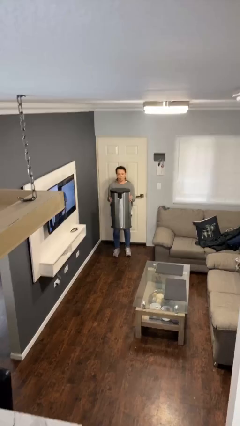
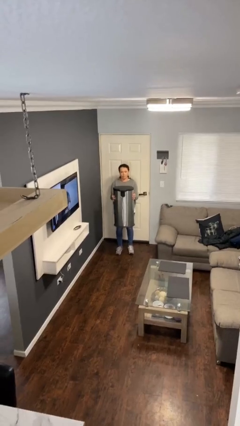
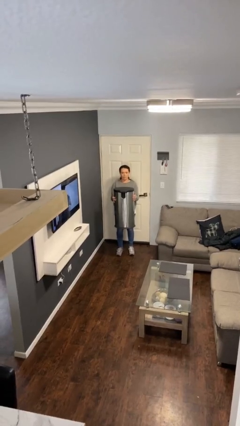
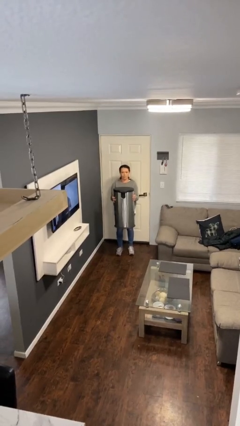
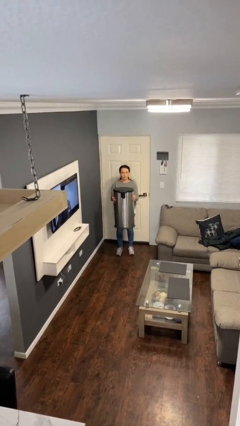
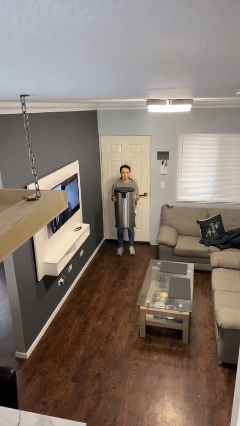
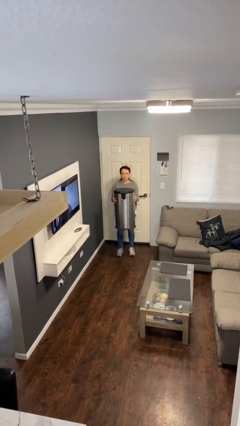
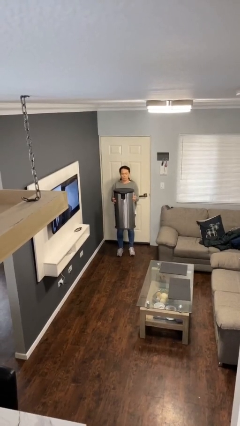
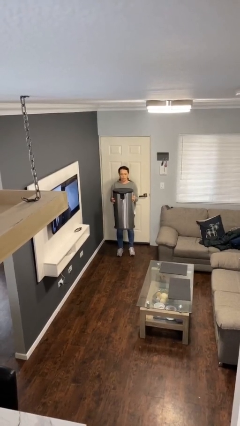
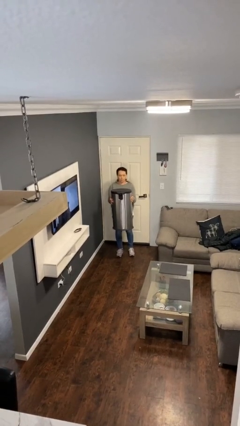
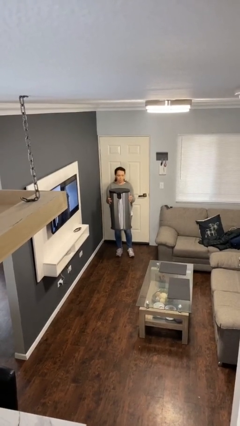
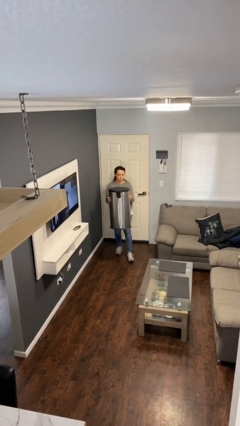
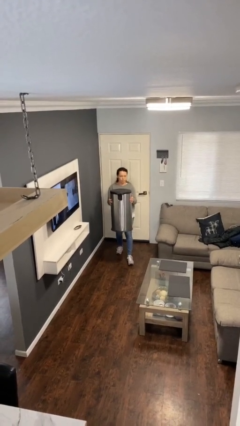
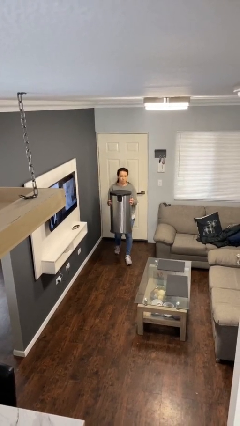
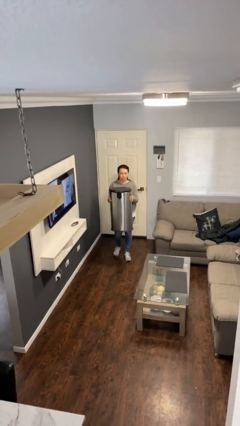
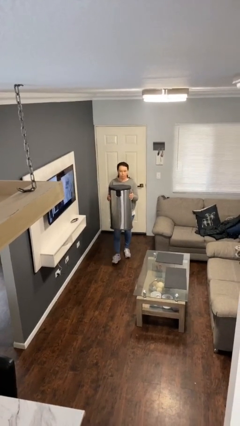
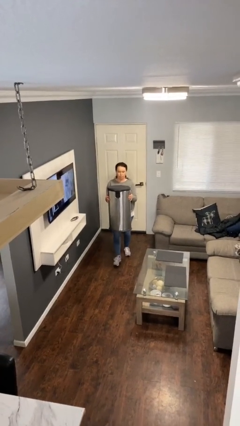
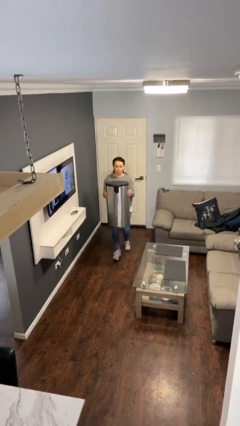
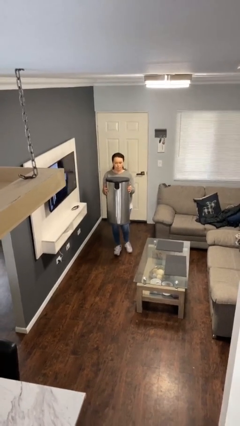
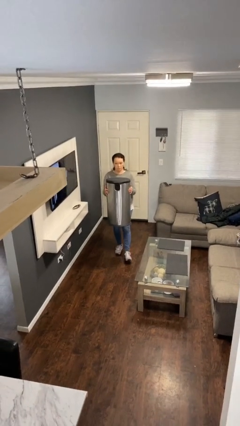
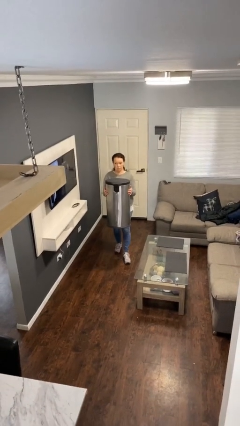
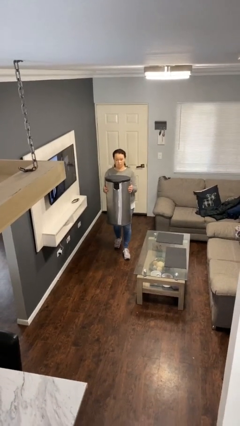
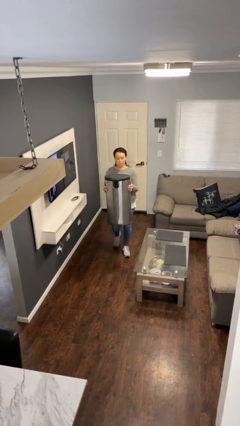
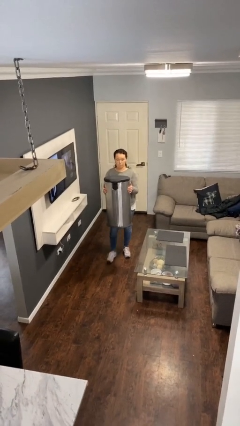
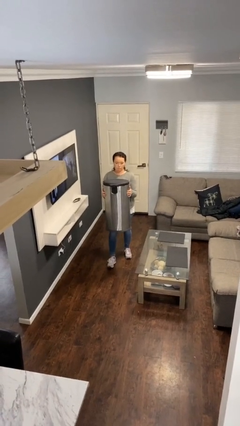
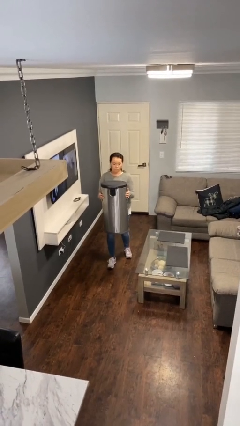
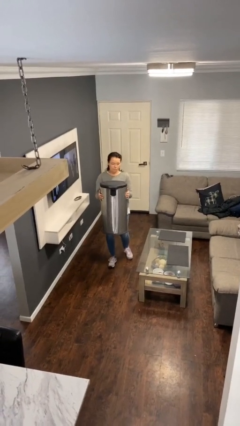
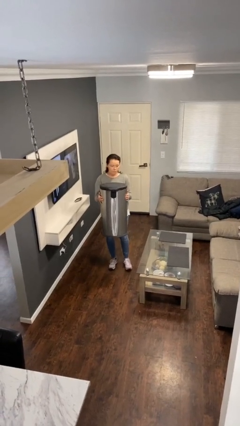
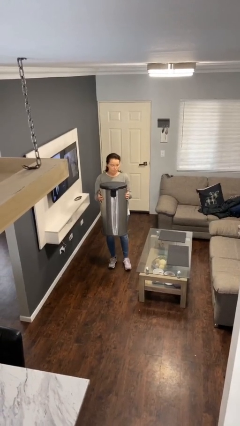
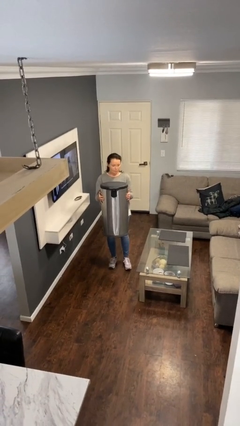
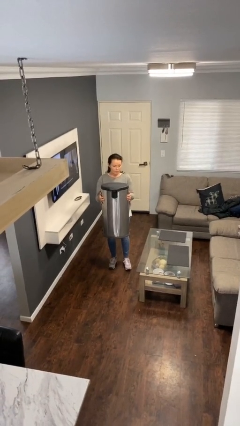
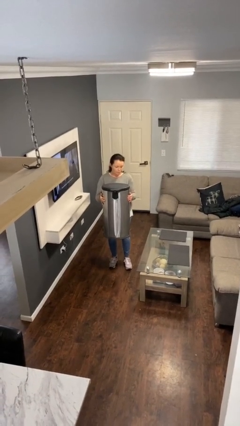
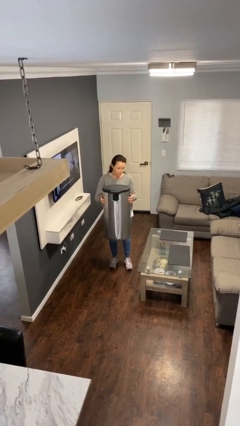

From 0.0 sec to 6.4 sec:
person carries heavy object

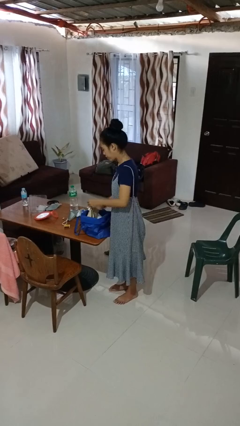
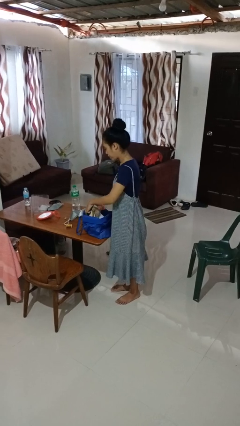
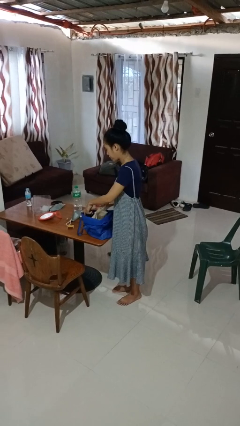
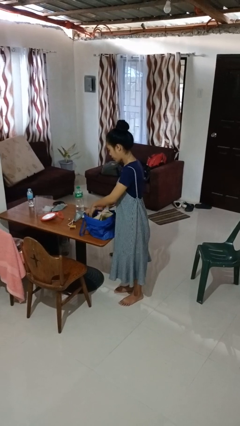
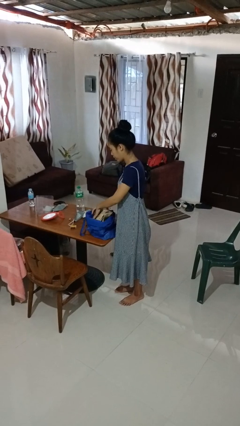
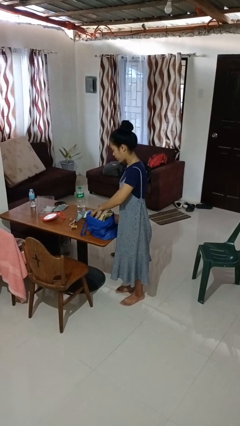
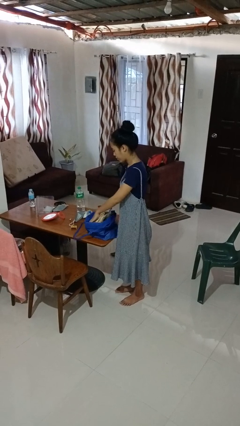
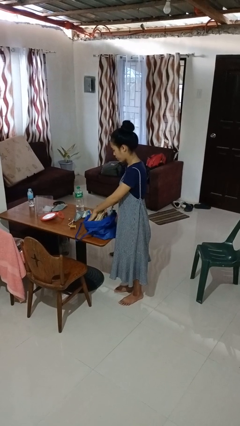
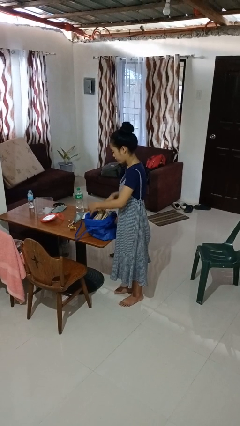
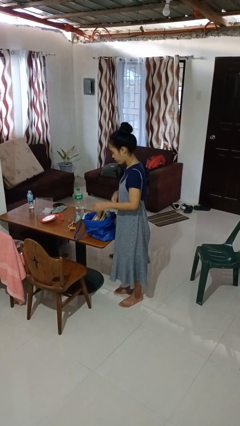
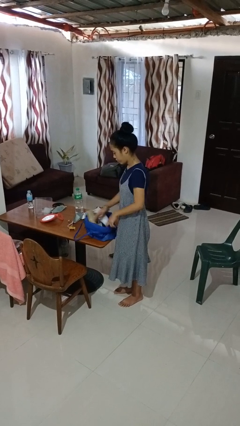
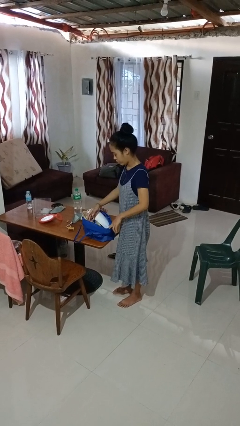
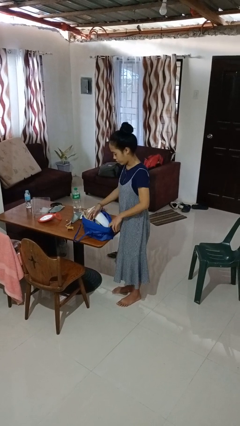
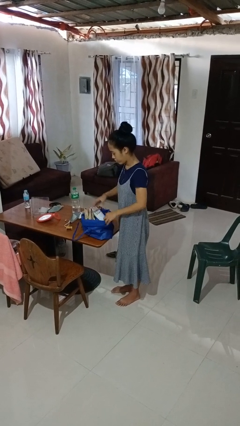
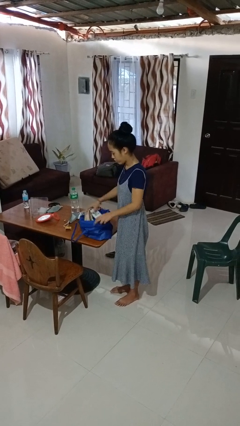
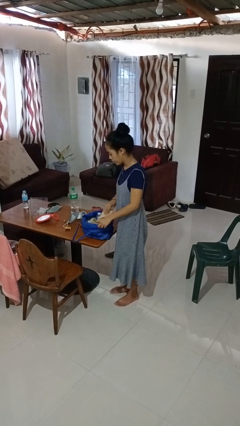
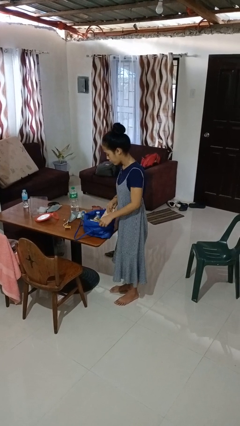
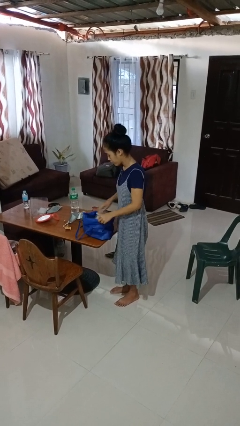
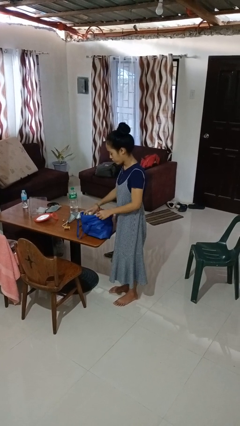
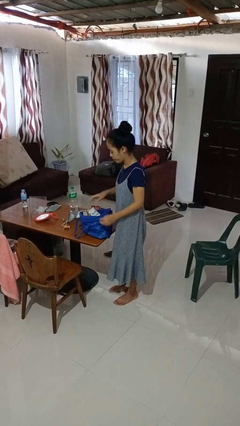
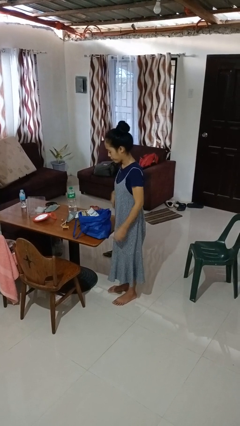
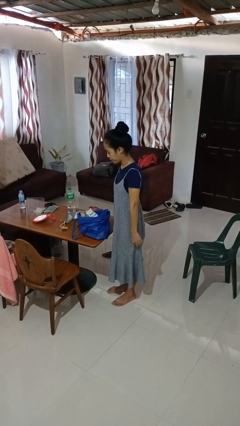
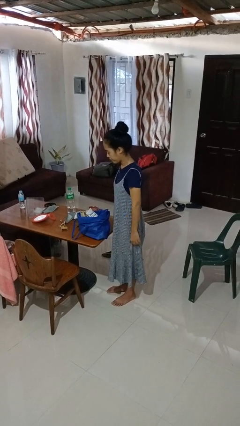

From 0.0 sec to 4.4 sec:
person searches in bag

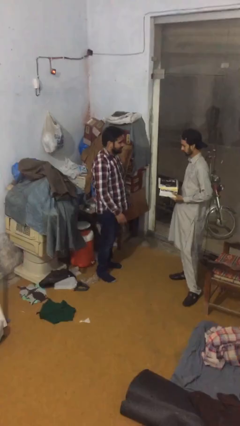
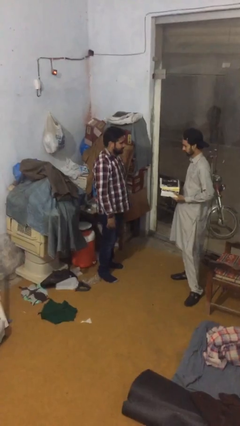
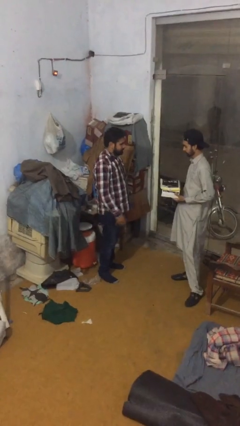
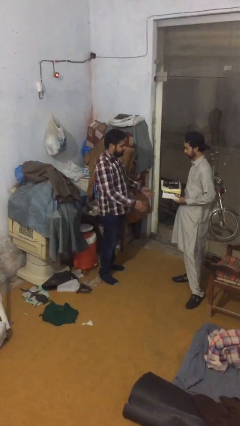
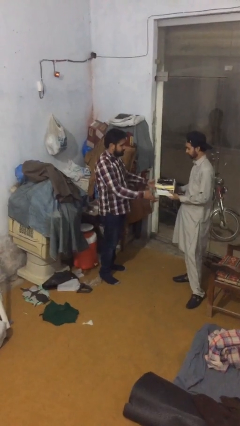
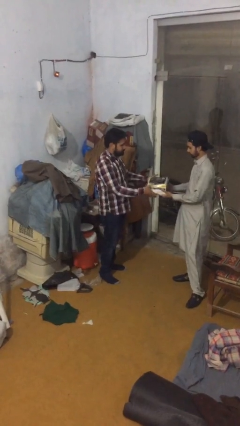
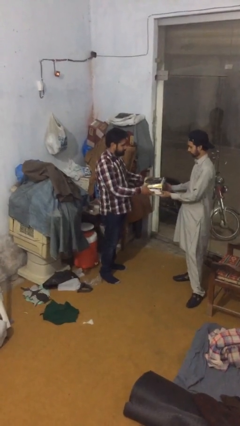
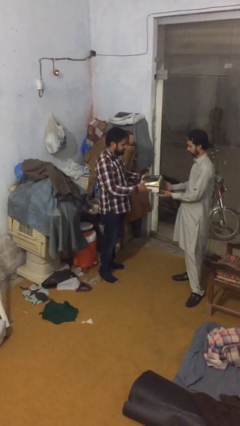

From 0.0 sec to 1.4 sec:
person transfers object to person

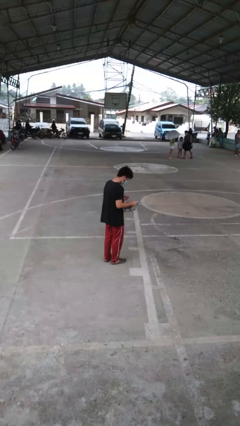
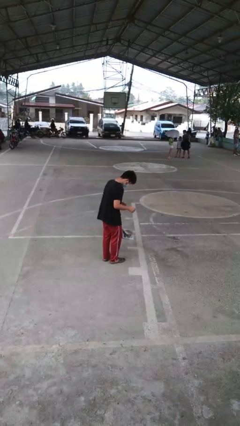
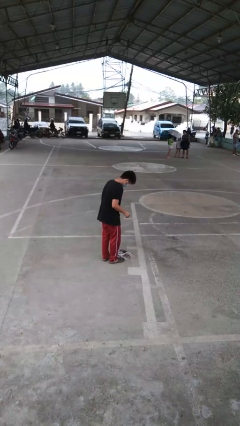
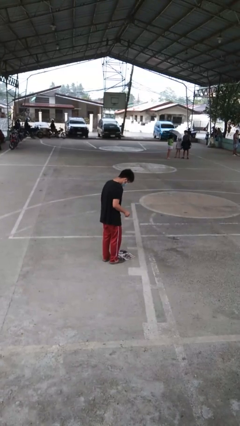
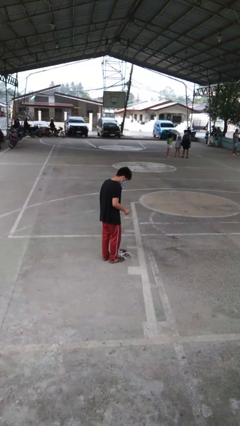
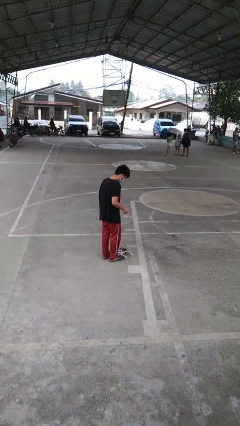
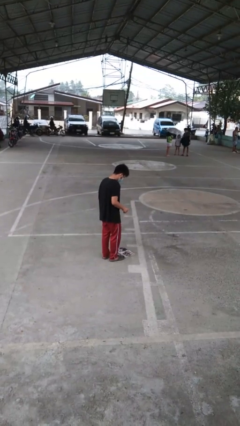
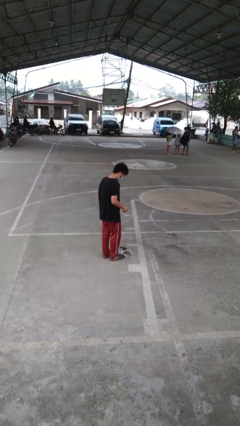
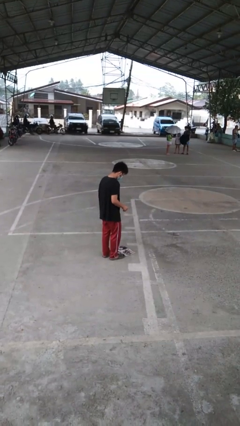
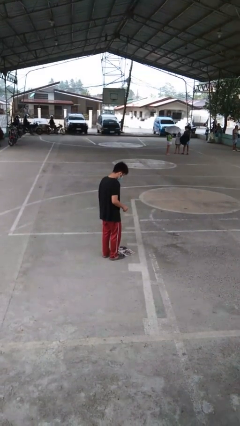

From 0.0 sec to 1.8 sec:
person drops object

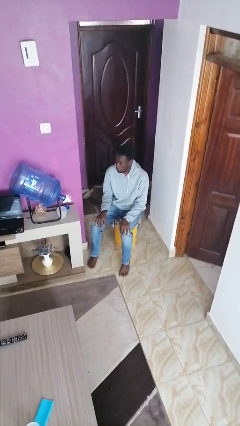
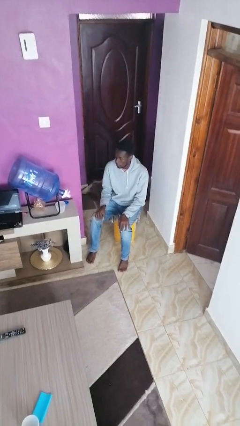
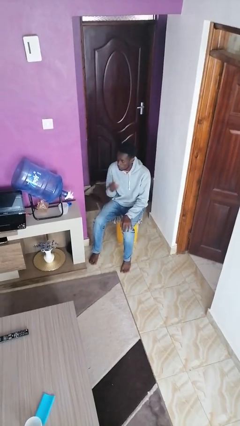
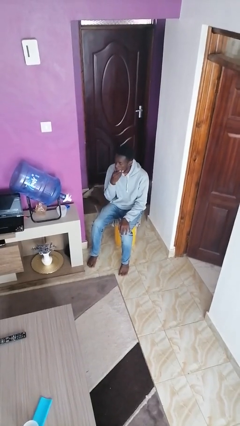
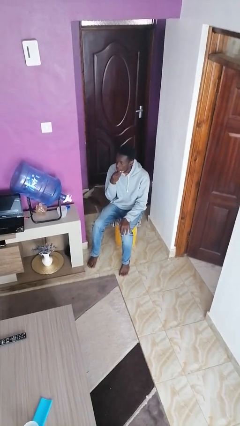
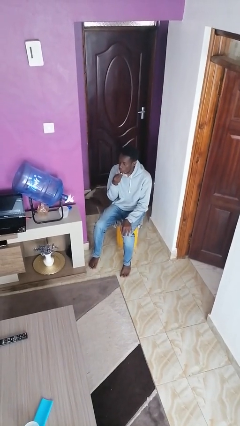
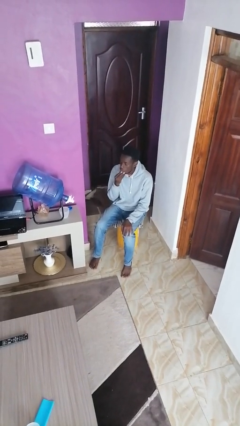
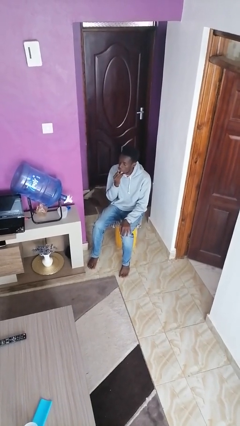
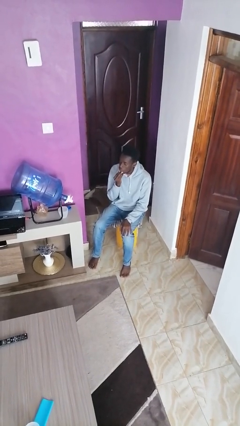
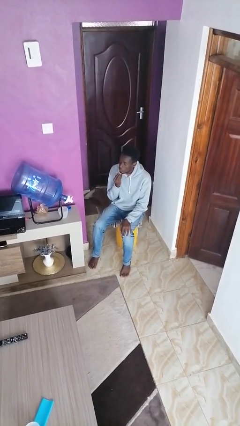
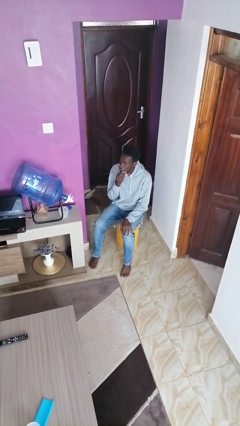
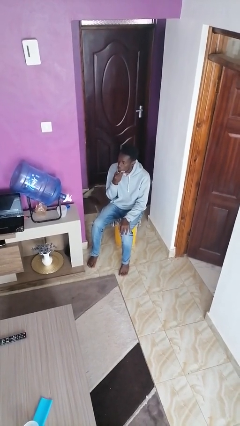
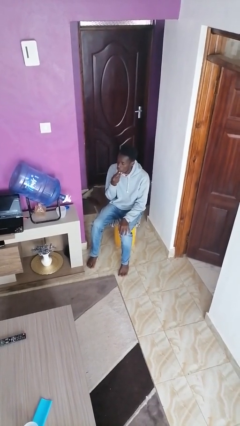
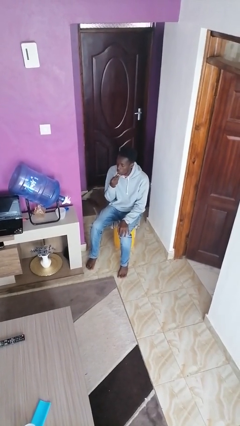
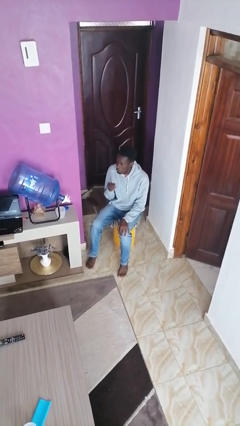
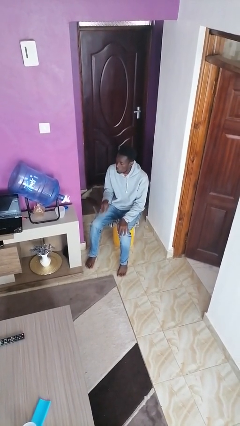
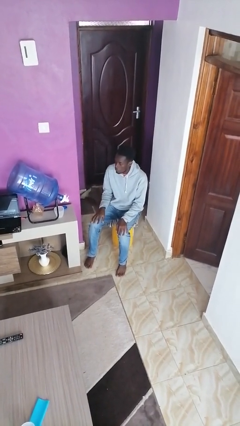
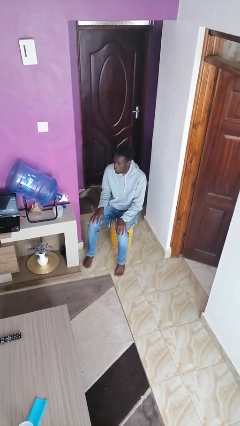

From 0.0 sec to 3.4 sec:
person strokes chin
